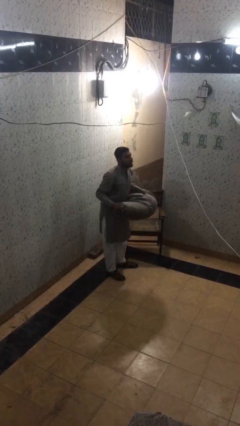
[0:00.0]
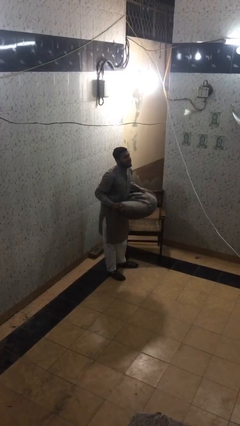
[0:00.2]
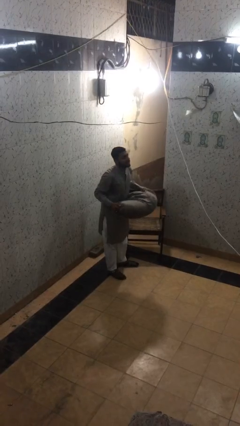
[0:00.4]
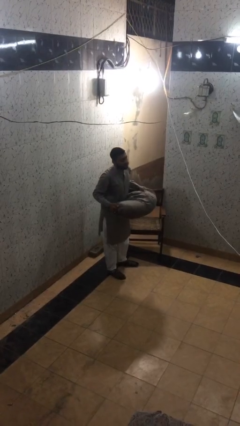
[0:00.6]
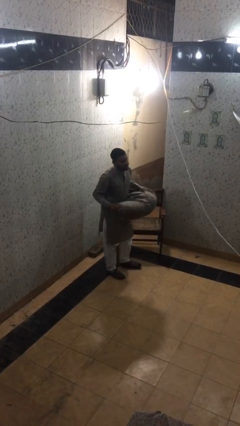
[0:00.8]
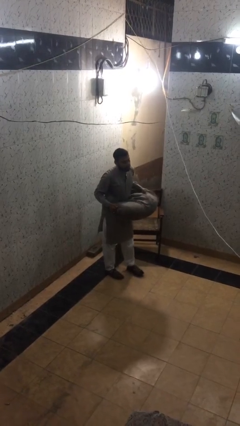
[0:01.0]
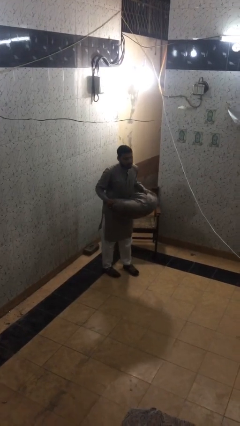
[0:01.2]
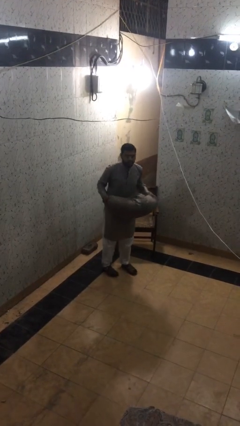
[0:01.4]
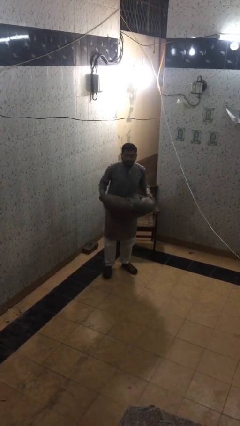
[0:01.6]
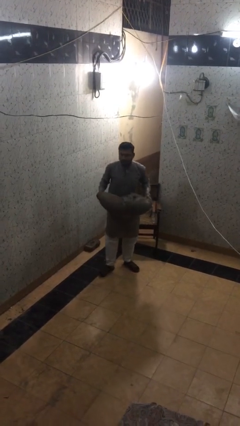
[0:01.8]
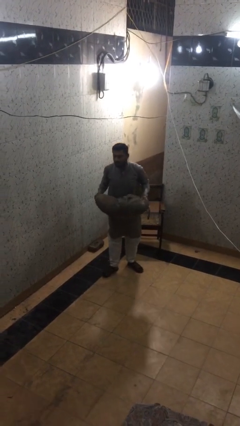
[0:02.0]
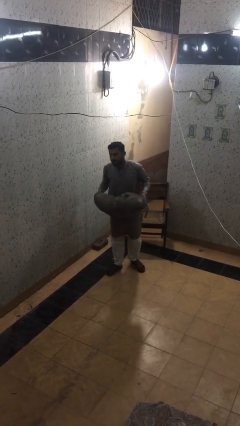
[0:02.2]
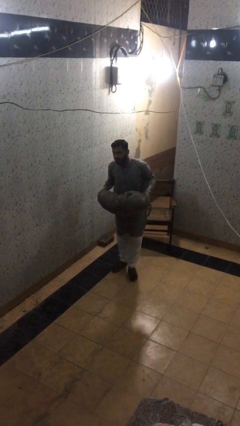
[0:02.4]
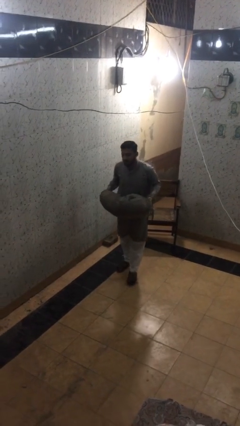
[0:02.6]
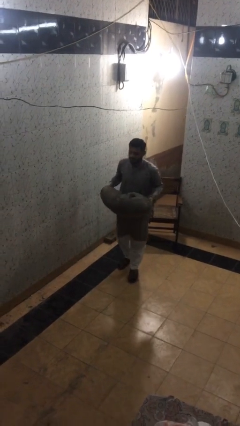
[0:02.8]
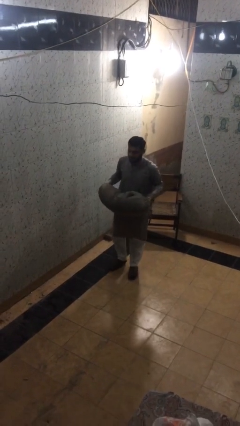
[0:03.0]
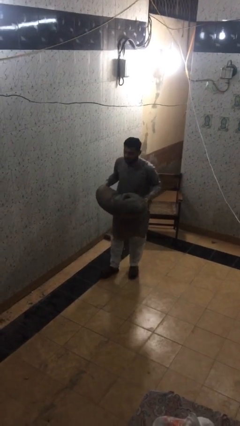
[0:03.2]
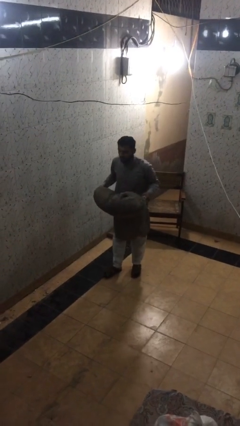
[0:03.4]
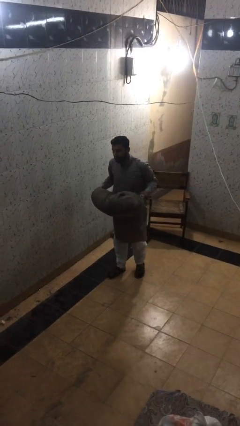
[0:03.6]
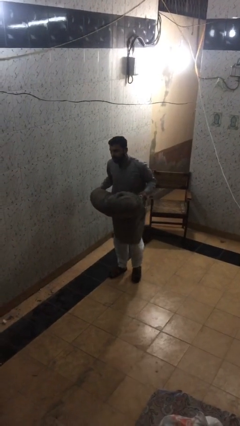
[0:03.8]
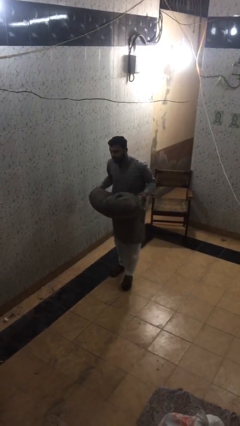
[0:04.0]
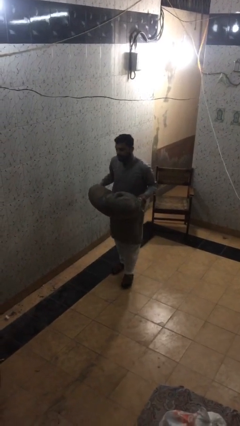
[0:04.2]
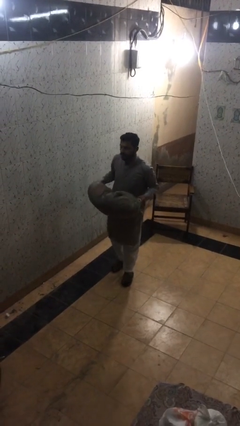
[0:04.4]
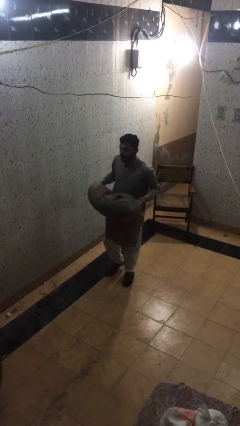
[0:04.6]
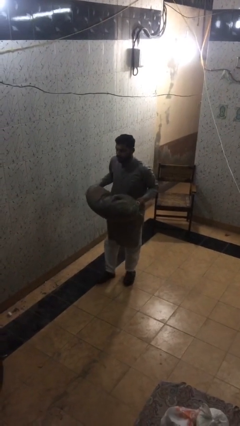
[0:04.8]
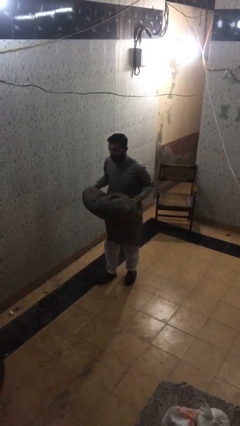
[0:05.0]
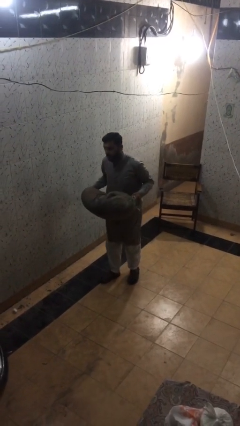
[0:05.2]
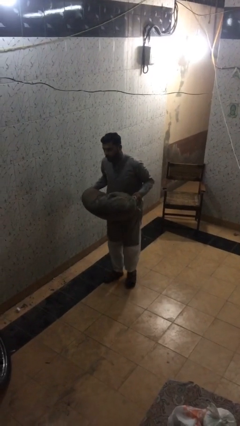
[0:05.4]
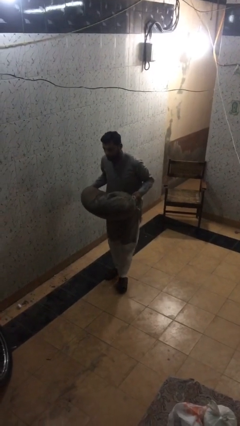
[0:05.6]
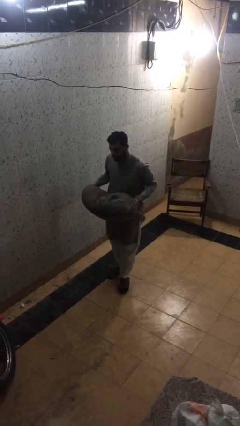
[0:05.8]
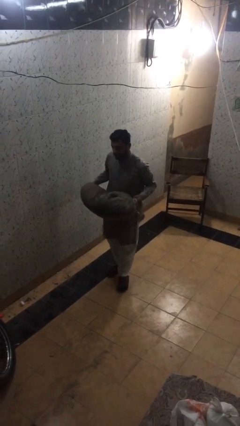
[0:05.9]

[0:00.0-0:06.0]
person carries heavy object

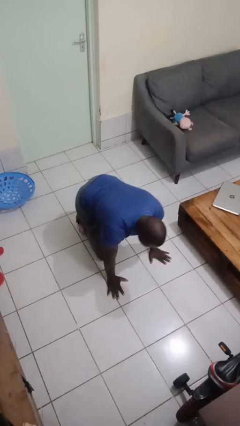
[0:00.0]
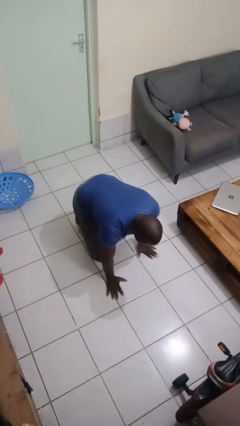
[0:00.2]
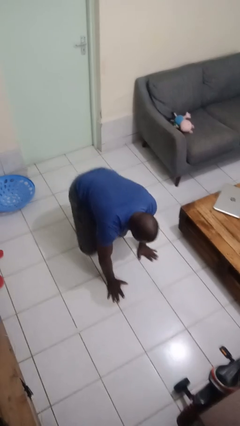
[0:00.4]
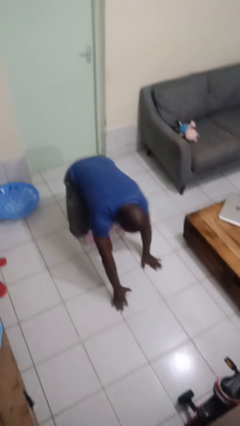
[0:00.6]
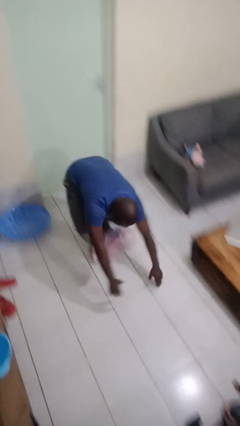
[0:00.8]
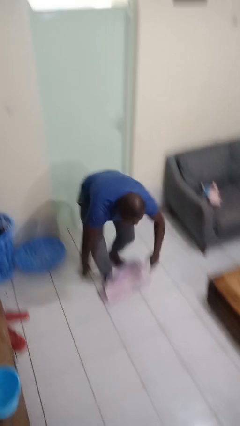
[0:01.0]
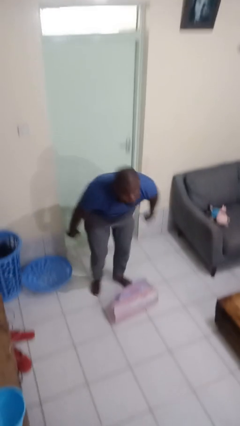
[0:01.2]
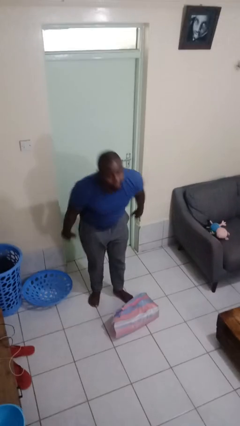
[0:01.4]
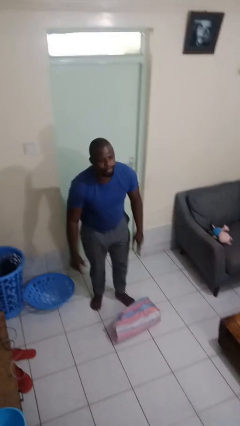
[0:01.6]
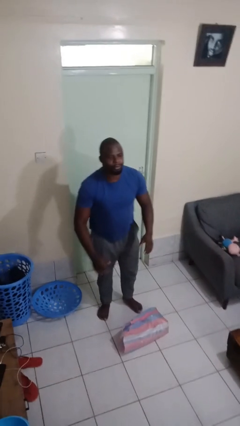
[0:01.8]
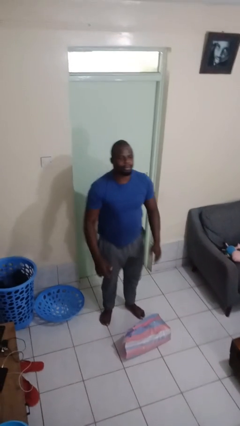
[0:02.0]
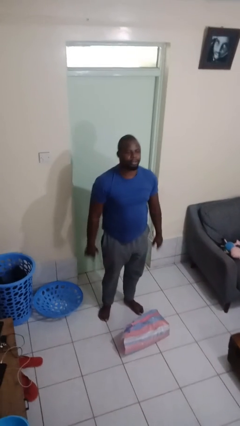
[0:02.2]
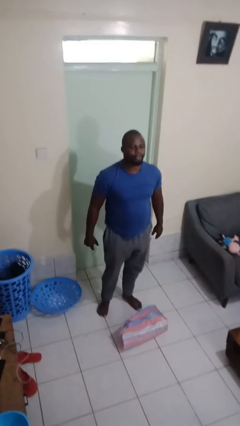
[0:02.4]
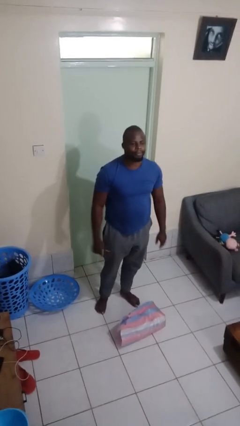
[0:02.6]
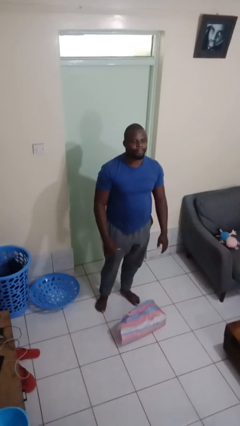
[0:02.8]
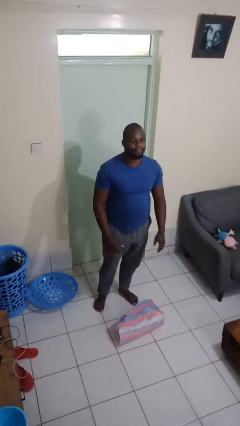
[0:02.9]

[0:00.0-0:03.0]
person stands up from floor

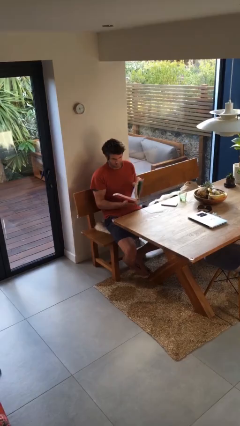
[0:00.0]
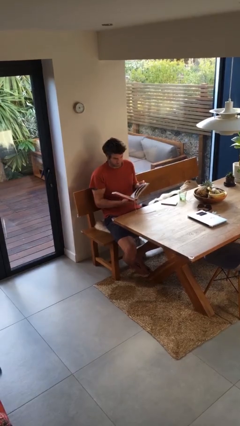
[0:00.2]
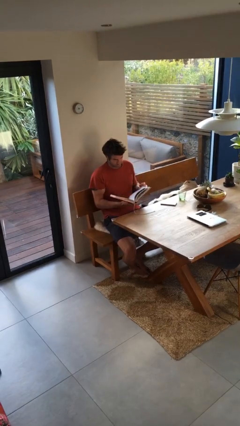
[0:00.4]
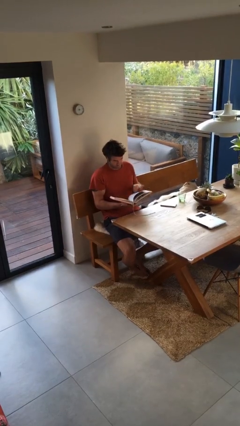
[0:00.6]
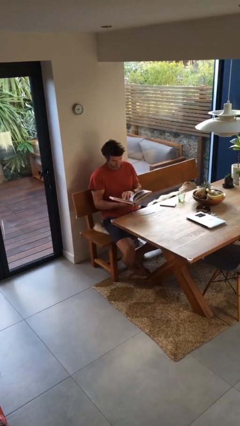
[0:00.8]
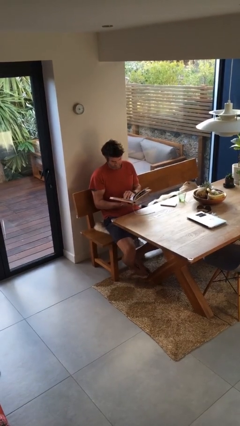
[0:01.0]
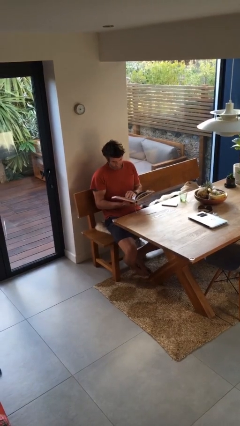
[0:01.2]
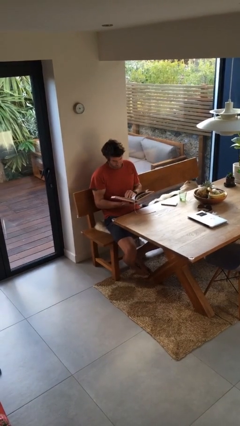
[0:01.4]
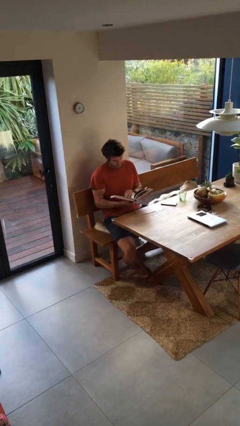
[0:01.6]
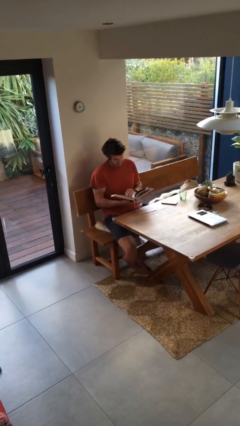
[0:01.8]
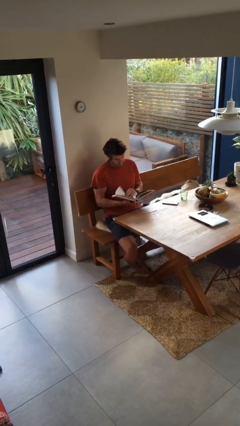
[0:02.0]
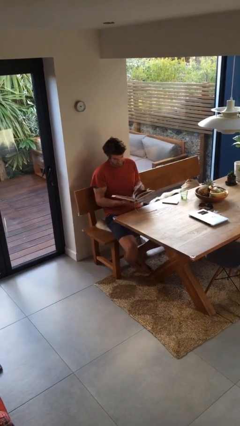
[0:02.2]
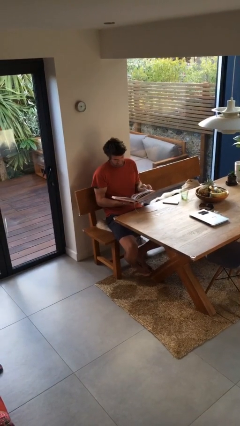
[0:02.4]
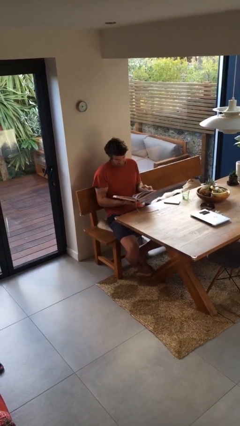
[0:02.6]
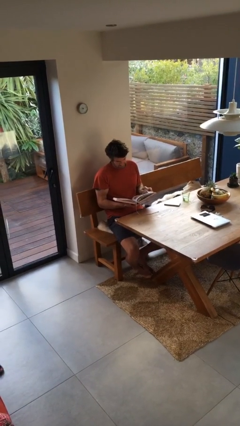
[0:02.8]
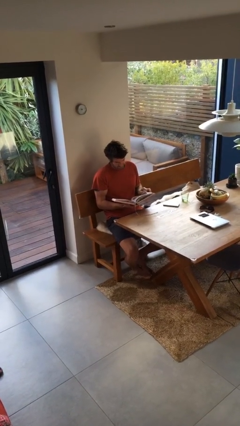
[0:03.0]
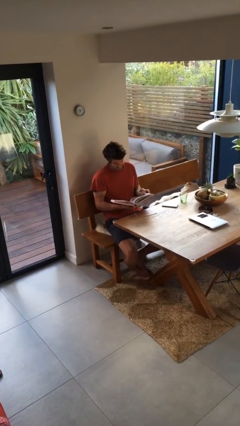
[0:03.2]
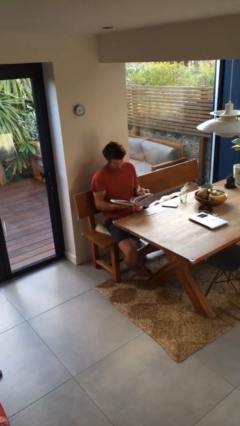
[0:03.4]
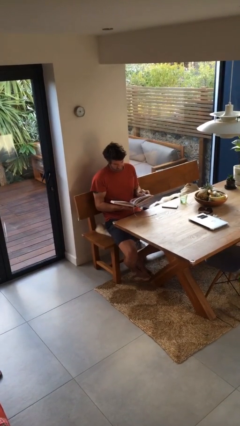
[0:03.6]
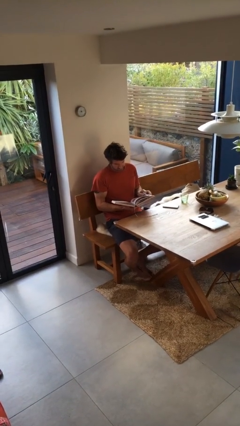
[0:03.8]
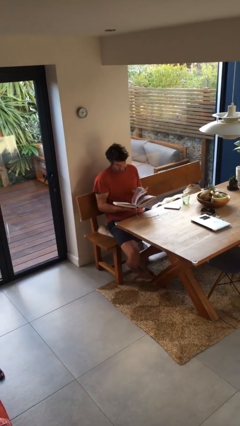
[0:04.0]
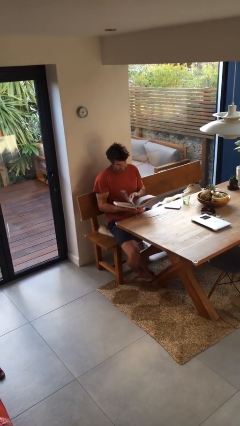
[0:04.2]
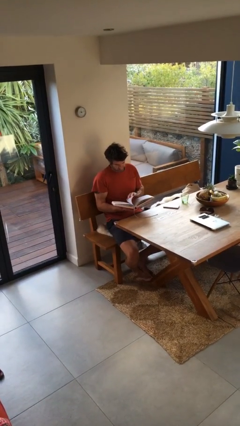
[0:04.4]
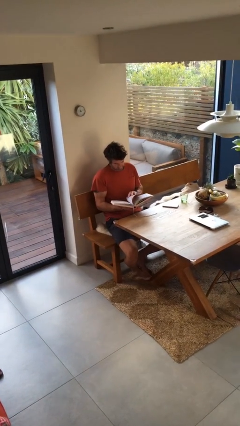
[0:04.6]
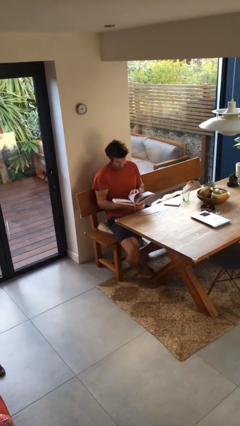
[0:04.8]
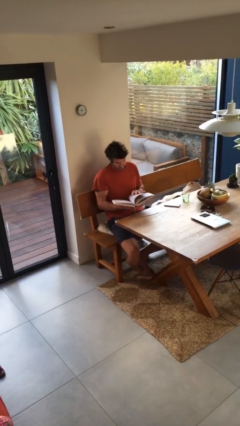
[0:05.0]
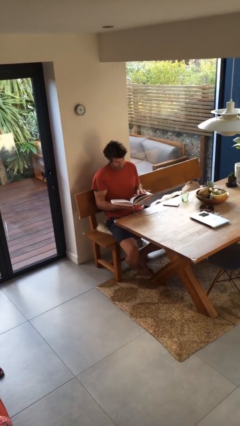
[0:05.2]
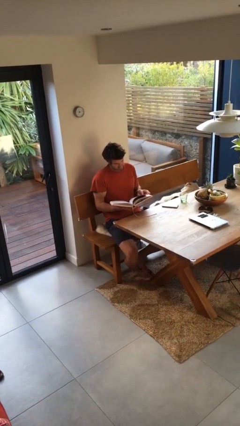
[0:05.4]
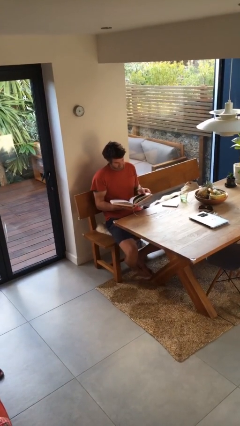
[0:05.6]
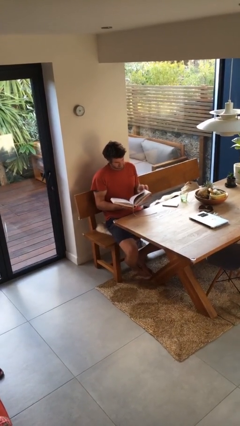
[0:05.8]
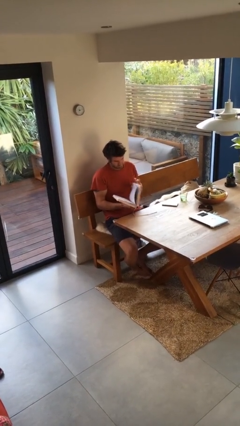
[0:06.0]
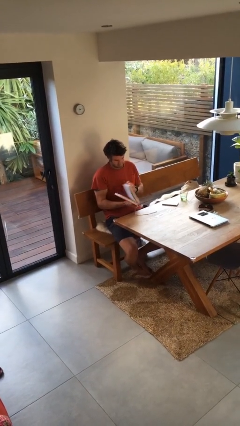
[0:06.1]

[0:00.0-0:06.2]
person reads document

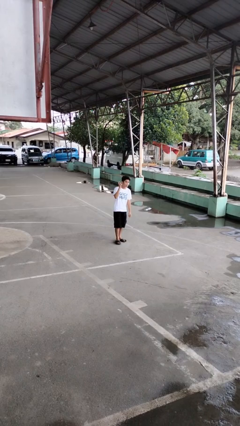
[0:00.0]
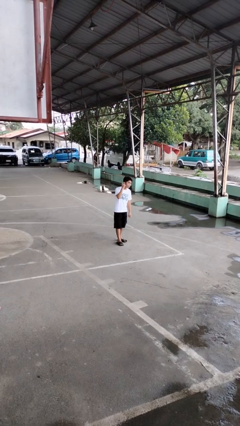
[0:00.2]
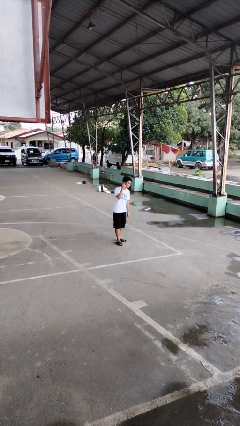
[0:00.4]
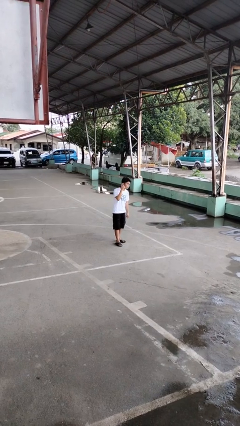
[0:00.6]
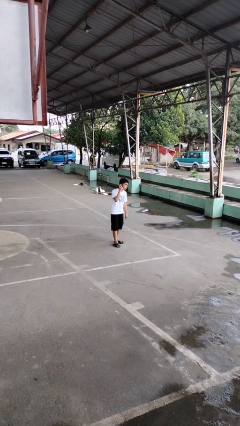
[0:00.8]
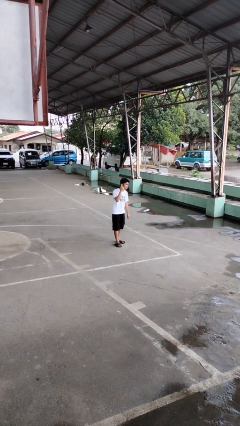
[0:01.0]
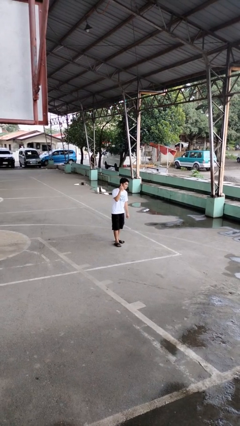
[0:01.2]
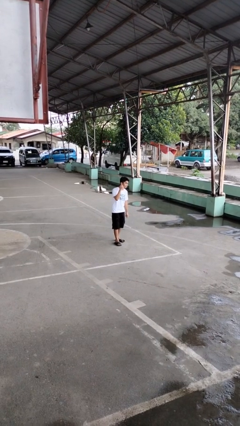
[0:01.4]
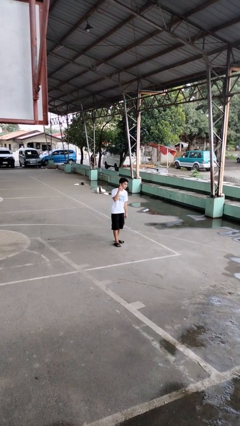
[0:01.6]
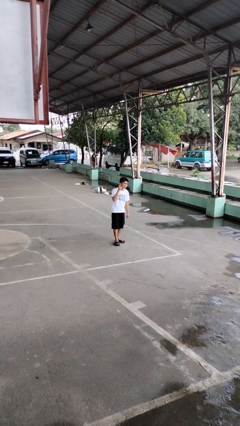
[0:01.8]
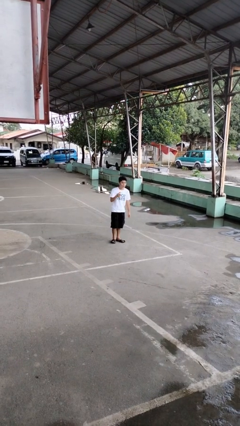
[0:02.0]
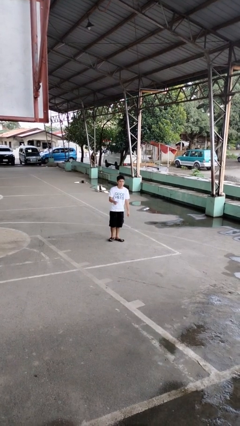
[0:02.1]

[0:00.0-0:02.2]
person gestures listen closely
